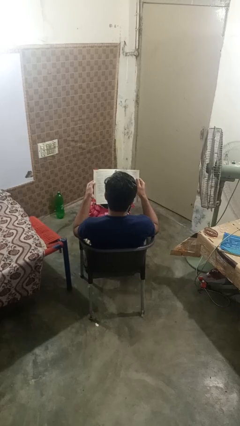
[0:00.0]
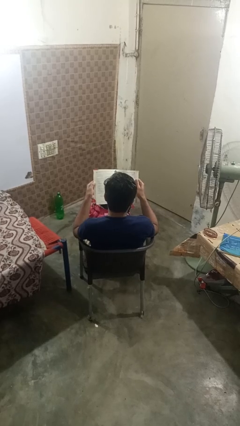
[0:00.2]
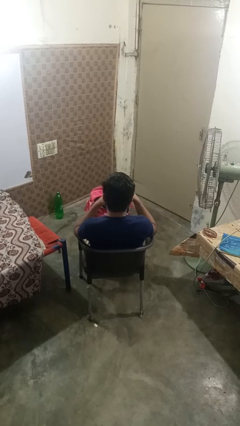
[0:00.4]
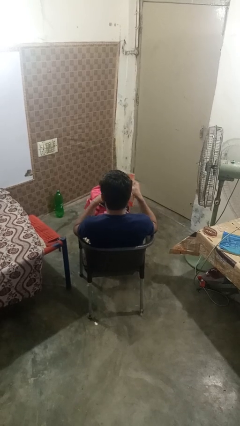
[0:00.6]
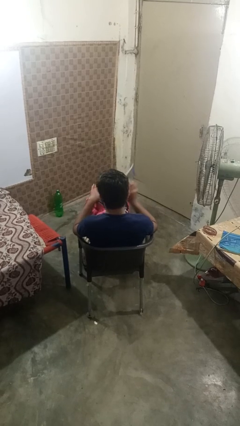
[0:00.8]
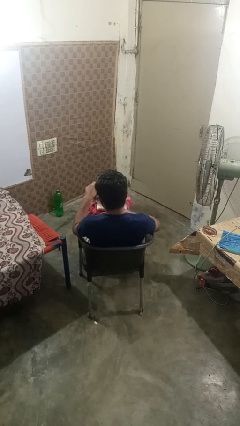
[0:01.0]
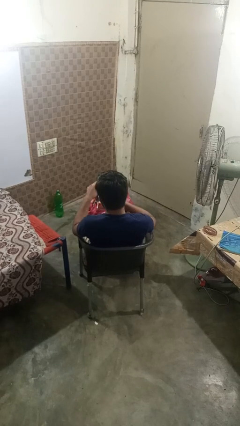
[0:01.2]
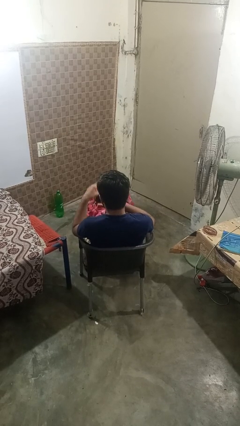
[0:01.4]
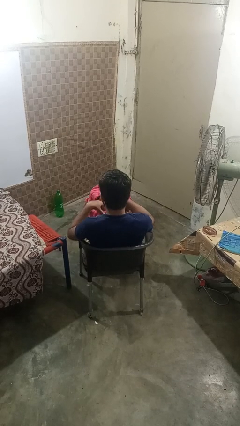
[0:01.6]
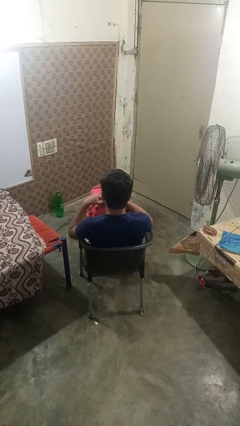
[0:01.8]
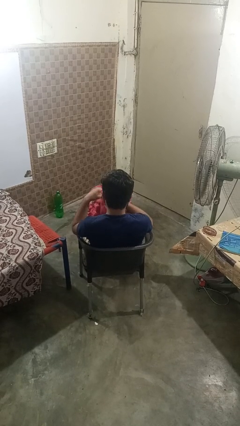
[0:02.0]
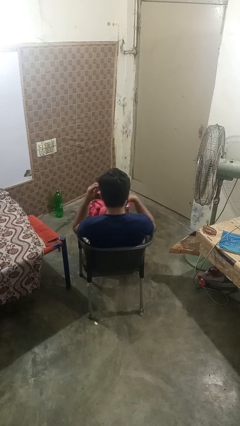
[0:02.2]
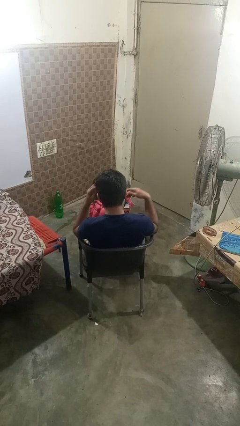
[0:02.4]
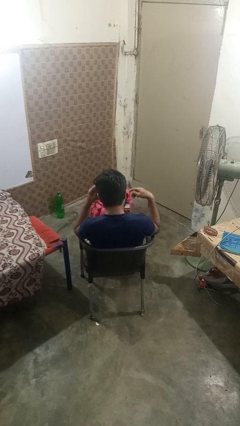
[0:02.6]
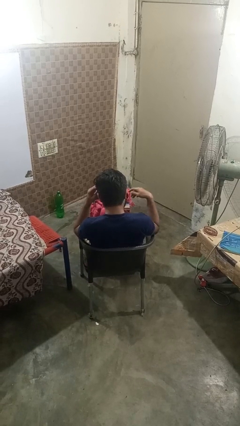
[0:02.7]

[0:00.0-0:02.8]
person puts object into backpack

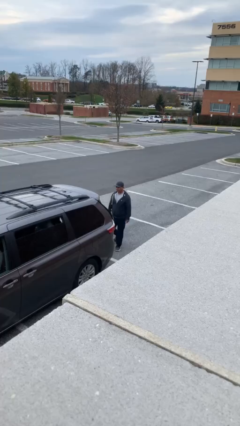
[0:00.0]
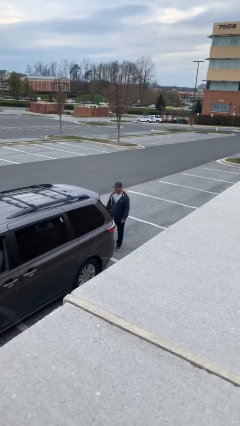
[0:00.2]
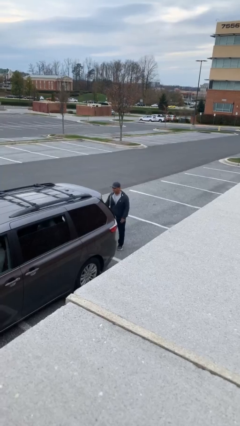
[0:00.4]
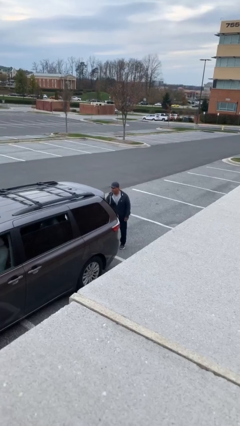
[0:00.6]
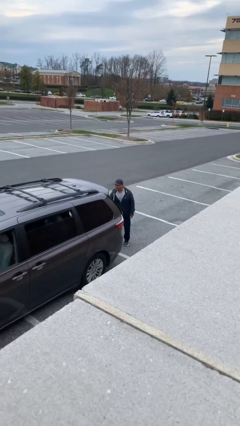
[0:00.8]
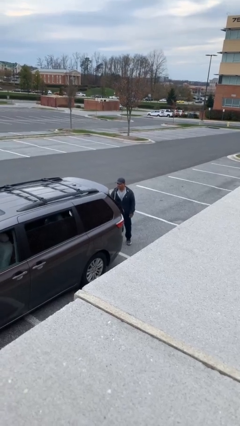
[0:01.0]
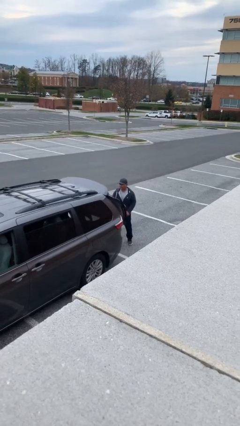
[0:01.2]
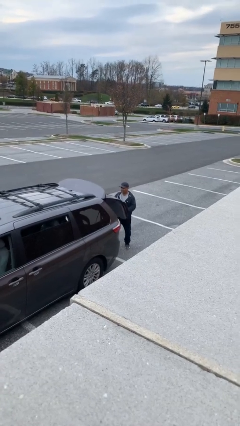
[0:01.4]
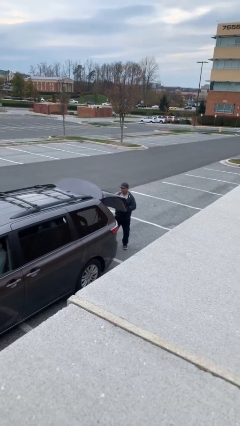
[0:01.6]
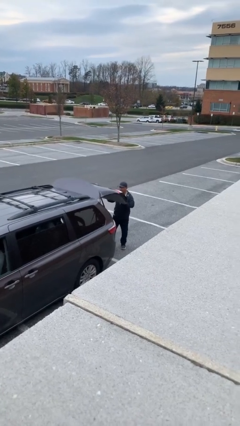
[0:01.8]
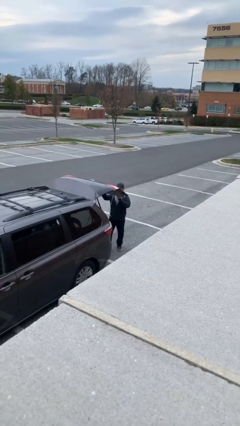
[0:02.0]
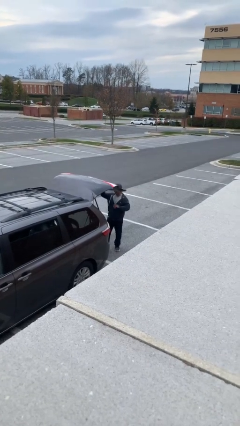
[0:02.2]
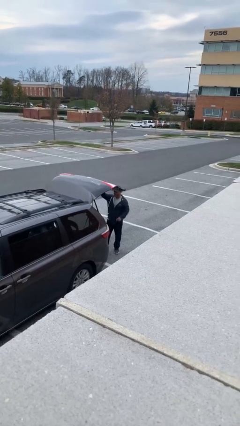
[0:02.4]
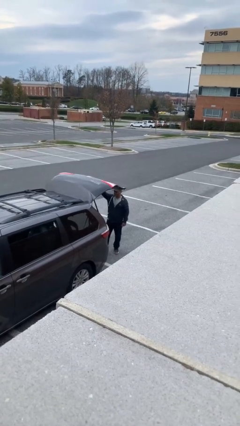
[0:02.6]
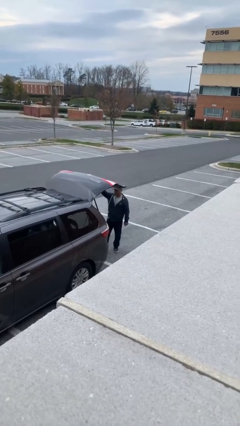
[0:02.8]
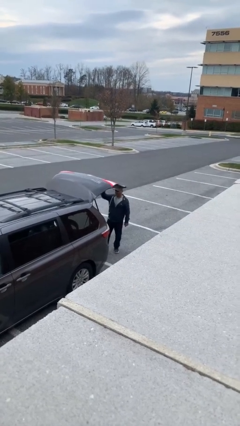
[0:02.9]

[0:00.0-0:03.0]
person opens car trunk

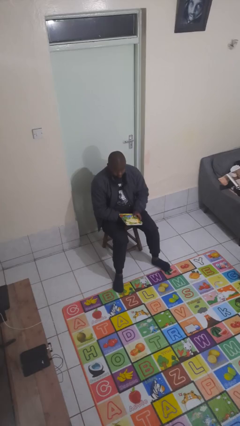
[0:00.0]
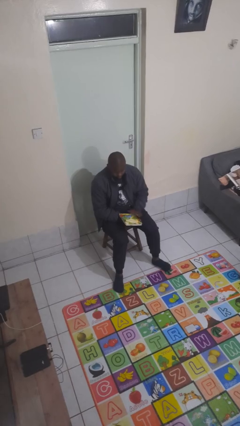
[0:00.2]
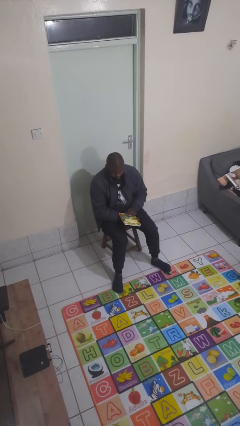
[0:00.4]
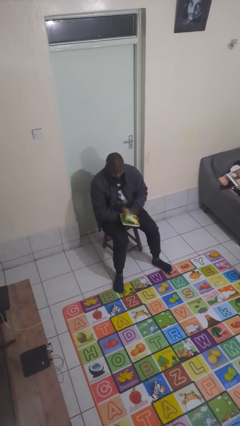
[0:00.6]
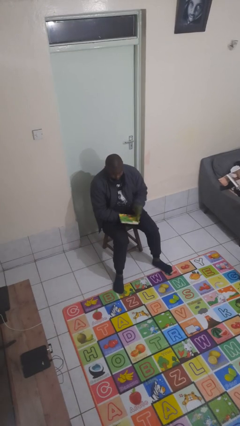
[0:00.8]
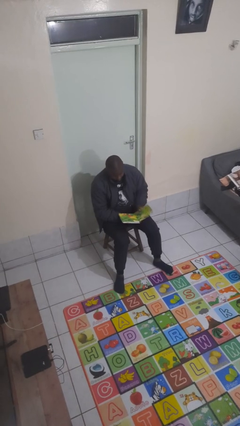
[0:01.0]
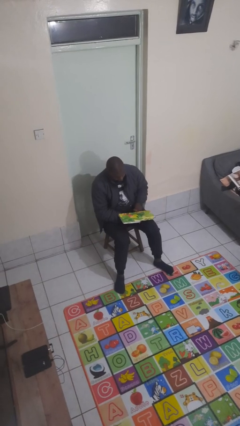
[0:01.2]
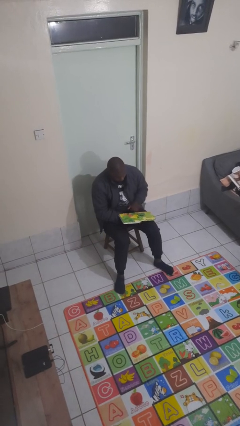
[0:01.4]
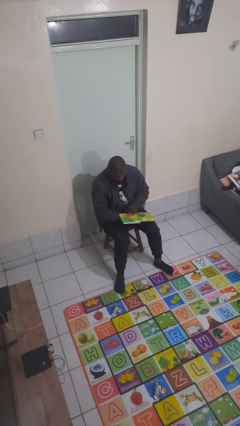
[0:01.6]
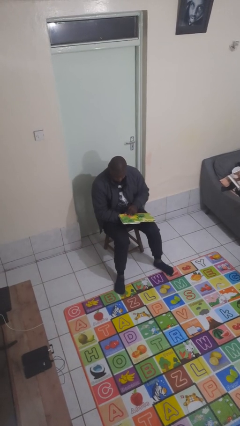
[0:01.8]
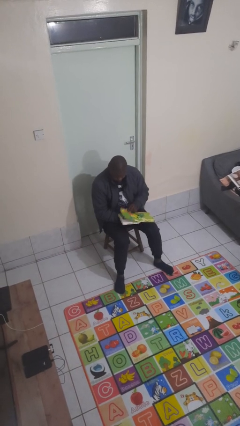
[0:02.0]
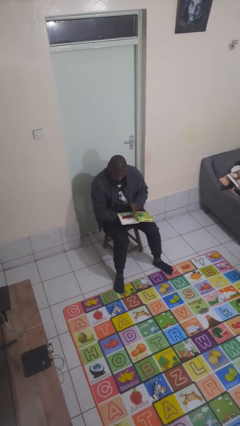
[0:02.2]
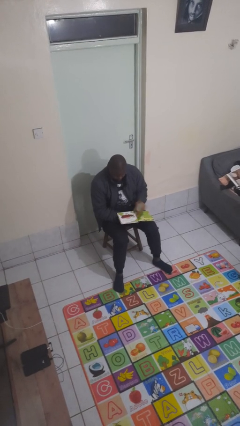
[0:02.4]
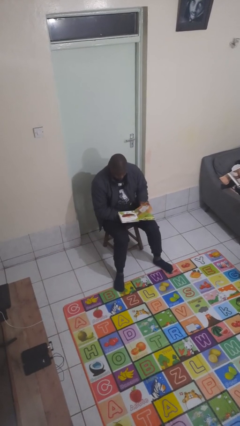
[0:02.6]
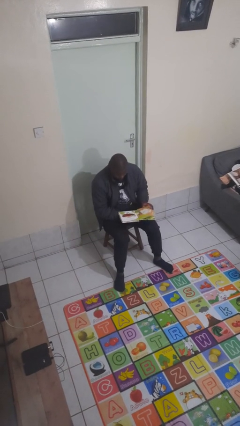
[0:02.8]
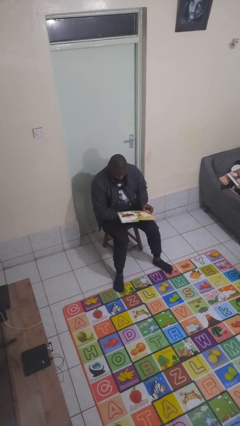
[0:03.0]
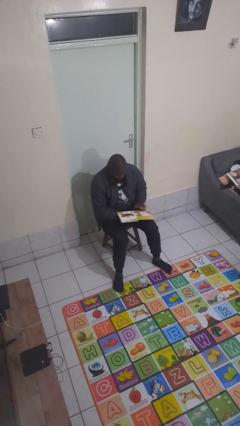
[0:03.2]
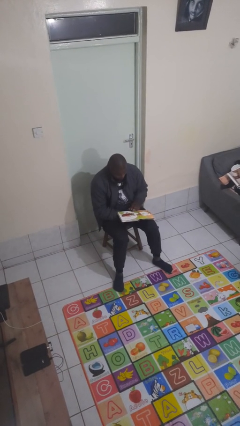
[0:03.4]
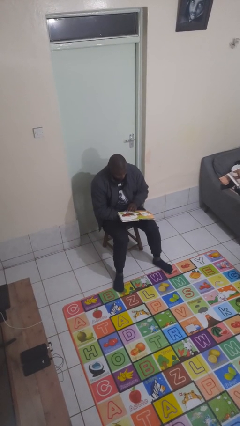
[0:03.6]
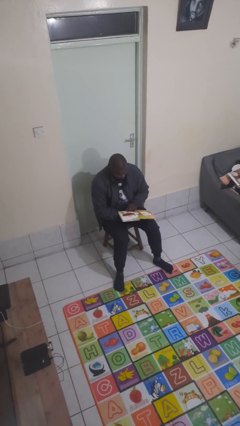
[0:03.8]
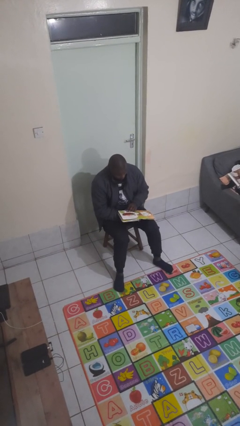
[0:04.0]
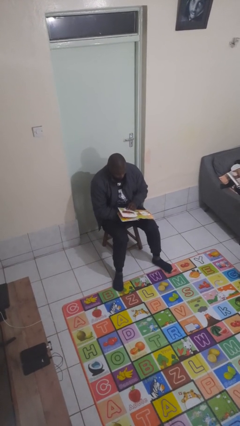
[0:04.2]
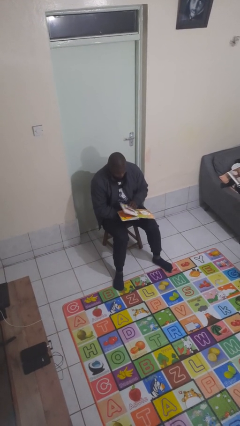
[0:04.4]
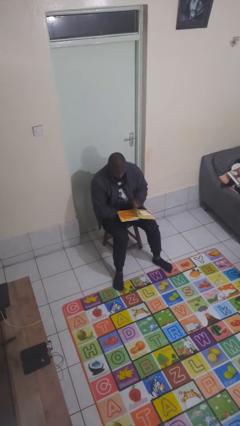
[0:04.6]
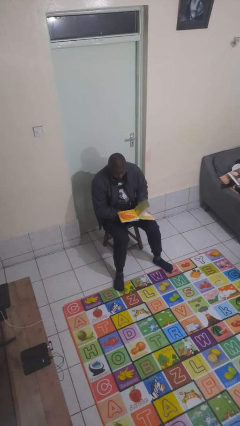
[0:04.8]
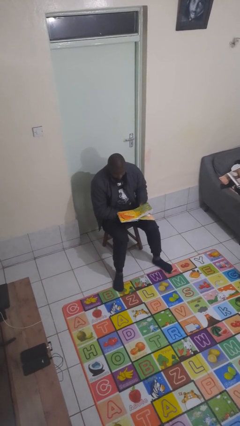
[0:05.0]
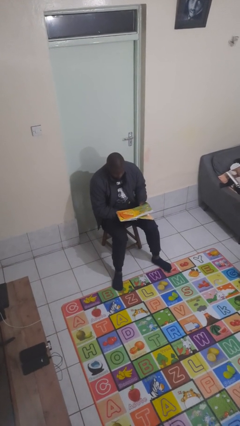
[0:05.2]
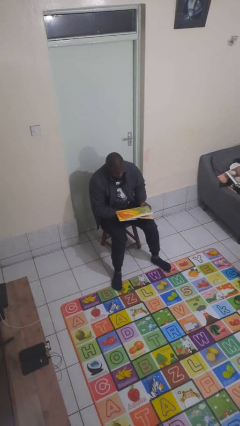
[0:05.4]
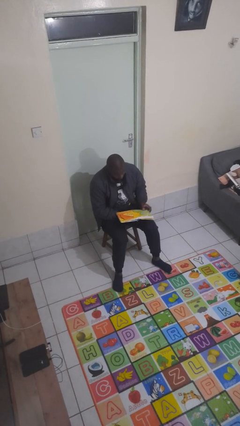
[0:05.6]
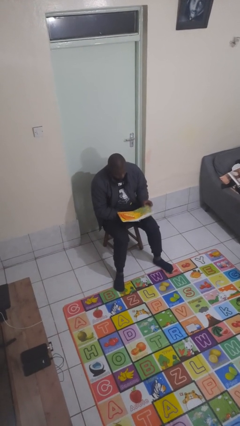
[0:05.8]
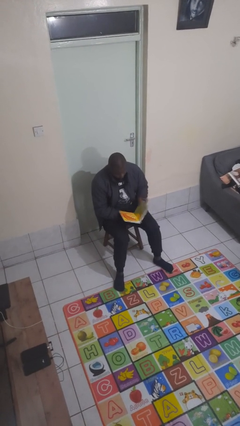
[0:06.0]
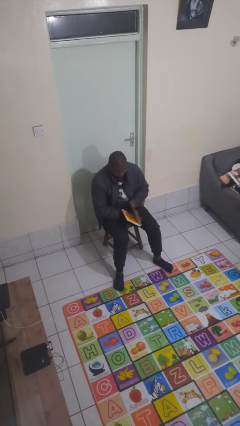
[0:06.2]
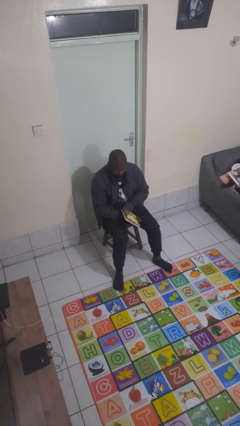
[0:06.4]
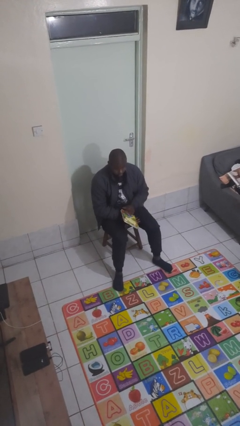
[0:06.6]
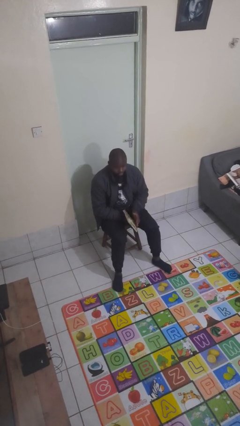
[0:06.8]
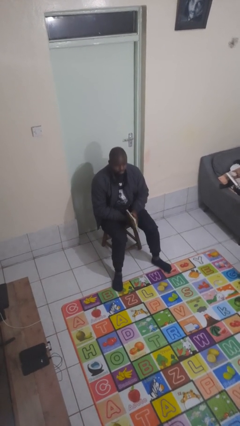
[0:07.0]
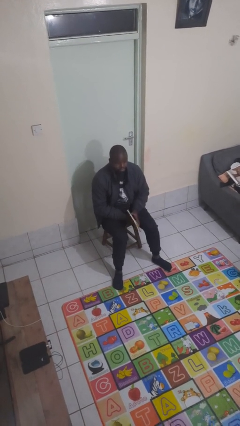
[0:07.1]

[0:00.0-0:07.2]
person reads book

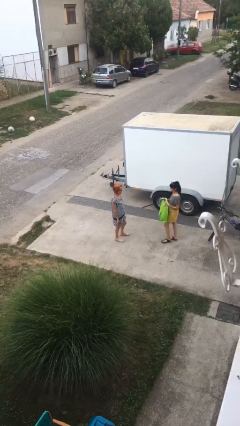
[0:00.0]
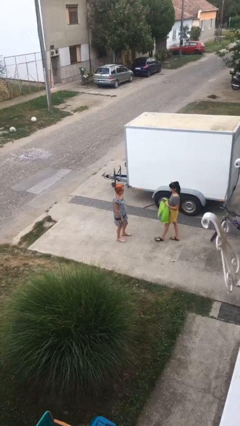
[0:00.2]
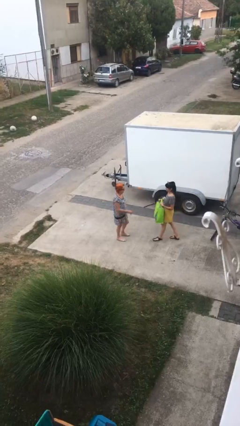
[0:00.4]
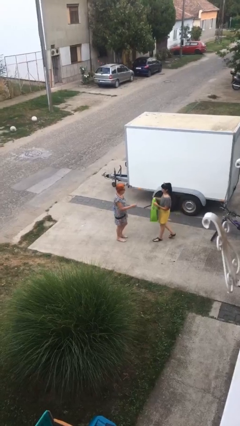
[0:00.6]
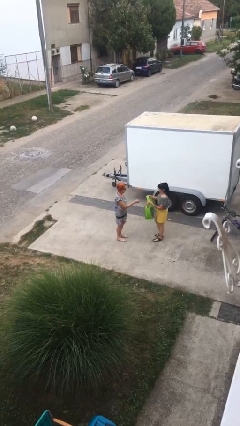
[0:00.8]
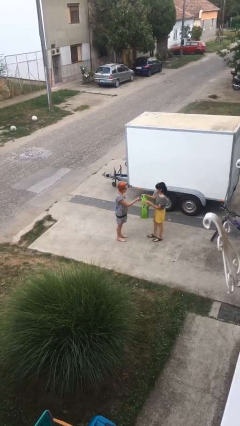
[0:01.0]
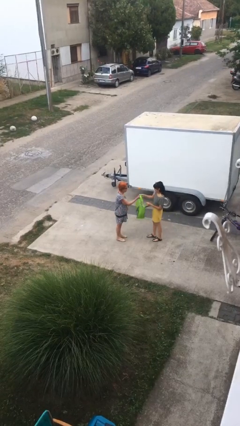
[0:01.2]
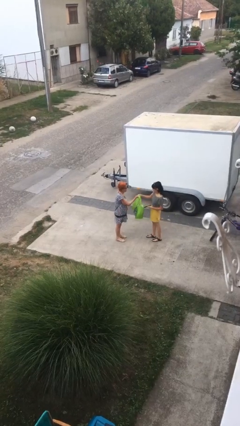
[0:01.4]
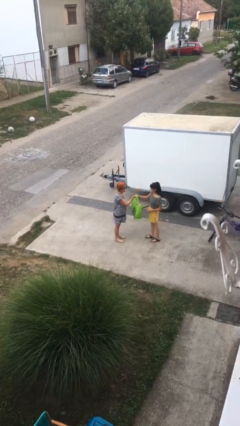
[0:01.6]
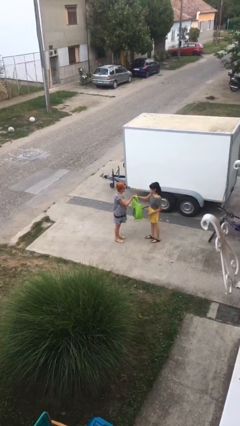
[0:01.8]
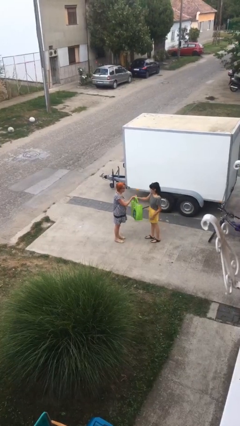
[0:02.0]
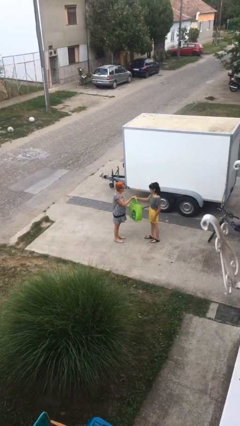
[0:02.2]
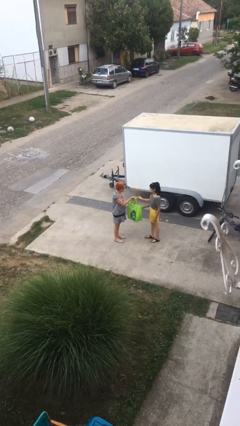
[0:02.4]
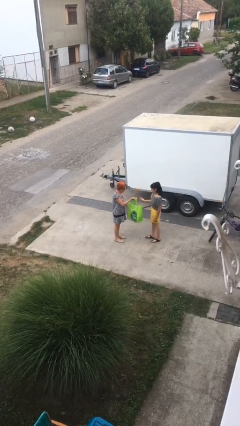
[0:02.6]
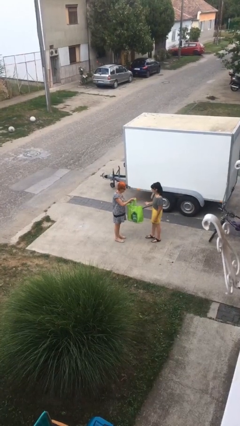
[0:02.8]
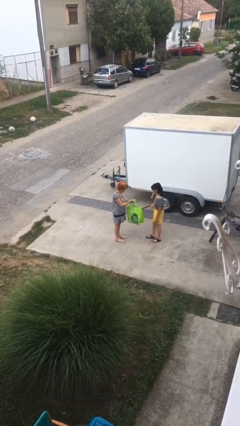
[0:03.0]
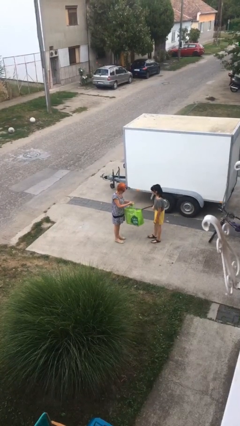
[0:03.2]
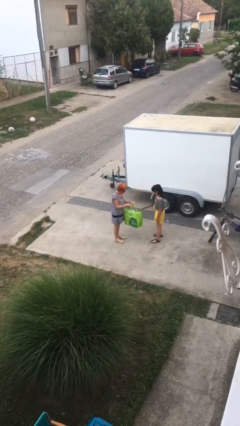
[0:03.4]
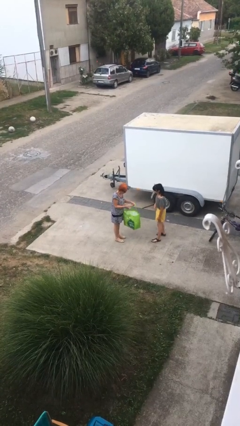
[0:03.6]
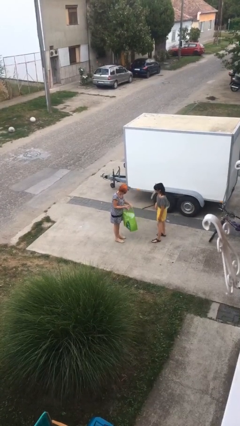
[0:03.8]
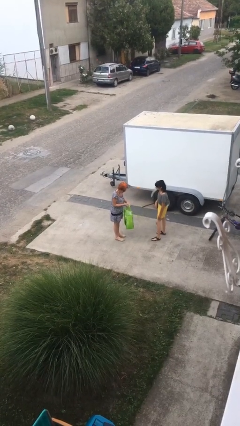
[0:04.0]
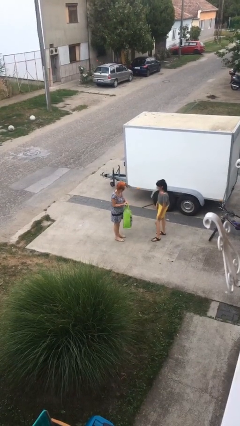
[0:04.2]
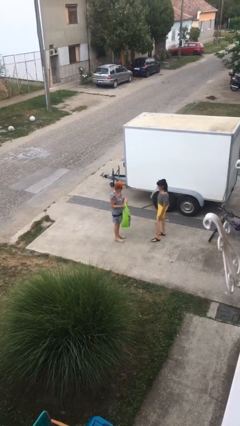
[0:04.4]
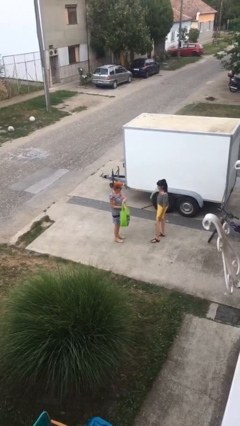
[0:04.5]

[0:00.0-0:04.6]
person transfers object to person

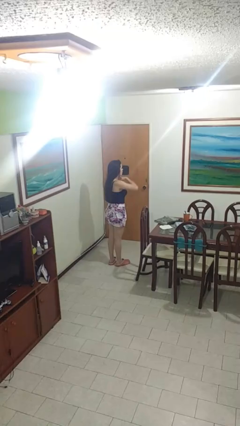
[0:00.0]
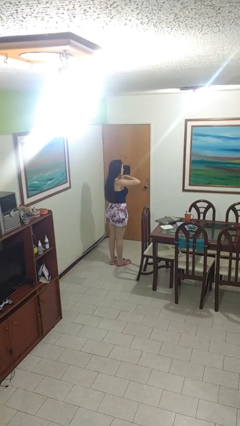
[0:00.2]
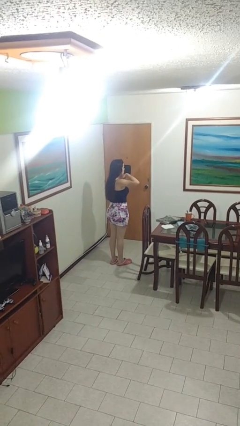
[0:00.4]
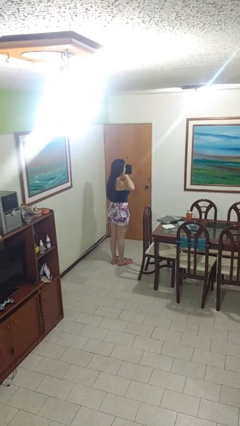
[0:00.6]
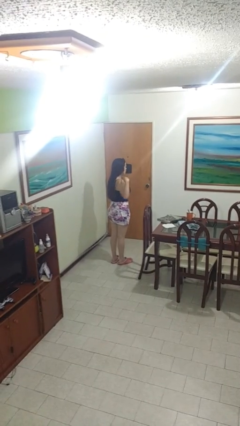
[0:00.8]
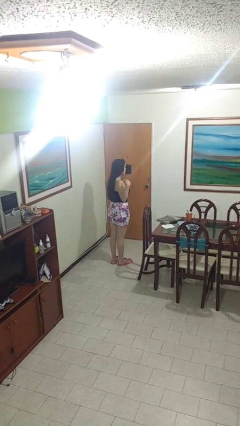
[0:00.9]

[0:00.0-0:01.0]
person gestures cut
